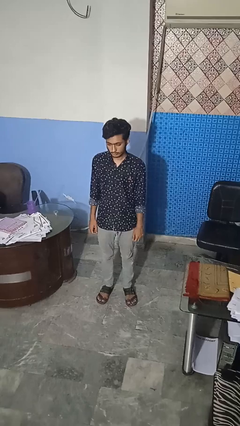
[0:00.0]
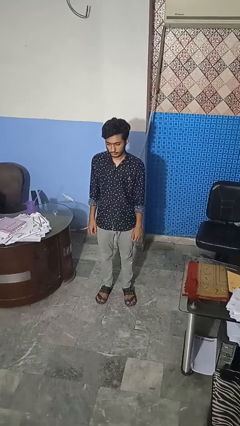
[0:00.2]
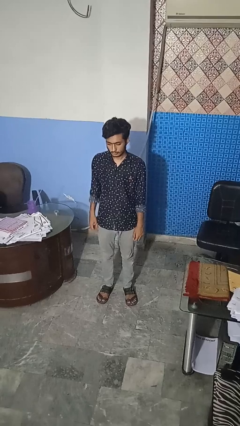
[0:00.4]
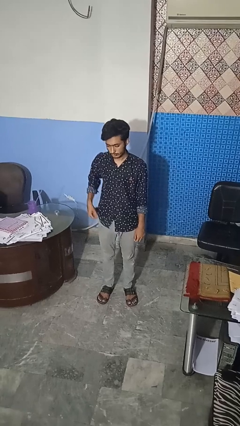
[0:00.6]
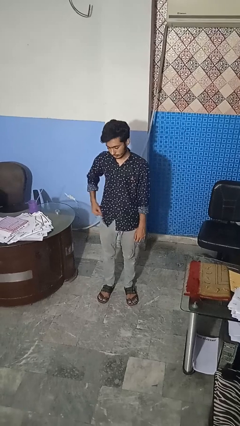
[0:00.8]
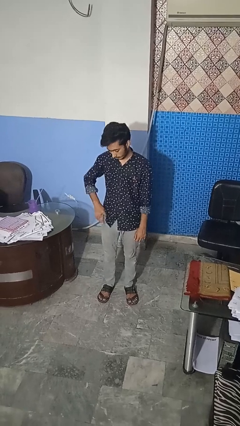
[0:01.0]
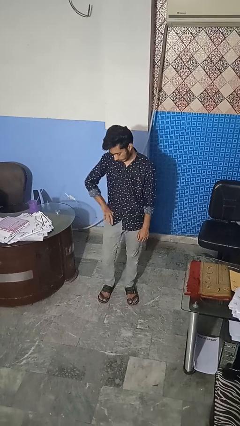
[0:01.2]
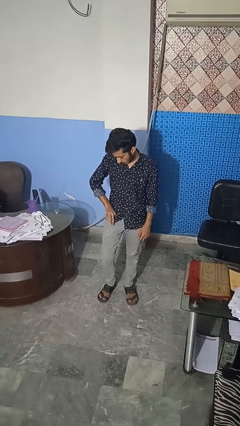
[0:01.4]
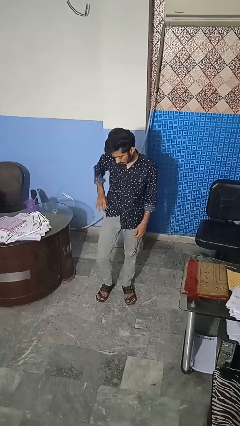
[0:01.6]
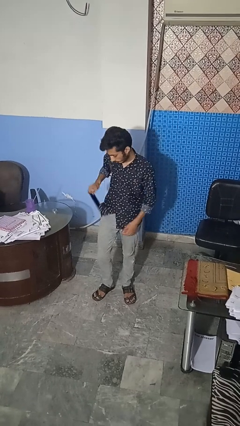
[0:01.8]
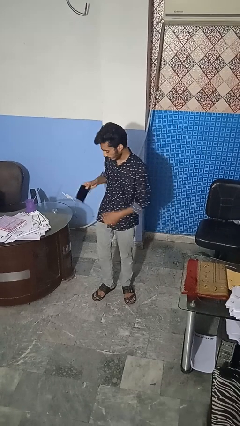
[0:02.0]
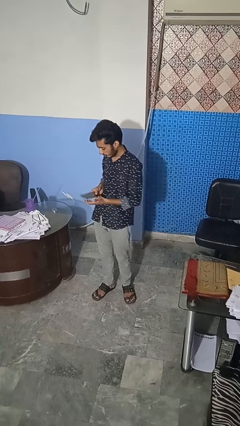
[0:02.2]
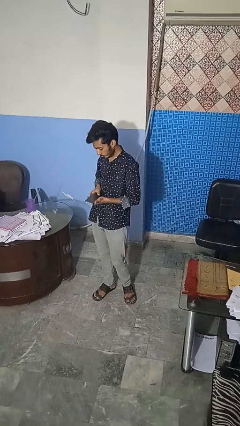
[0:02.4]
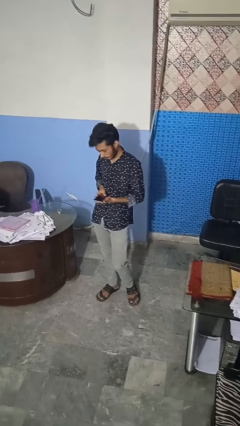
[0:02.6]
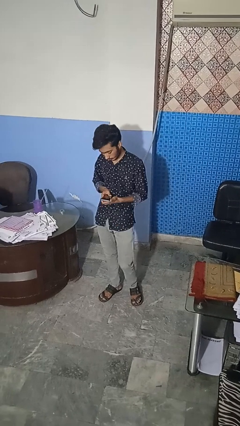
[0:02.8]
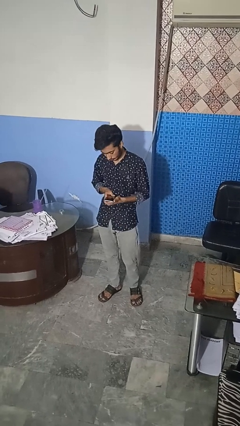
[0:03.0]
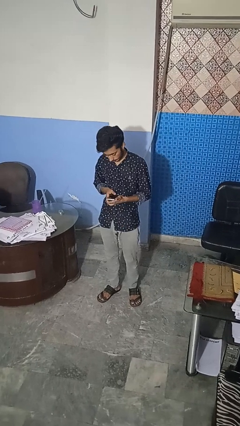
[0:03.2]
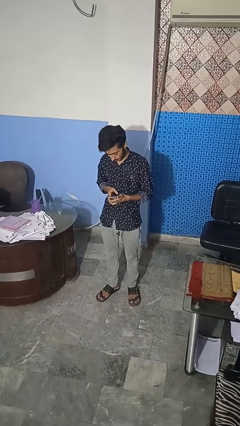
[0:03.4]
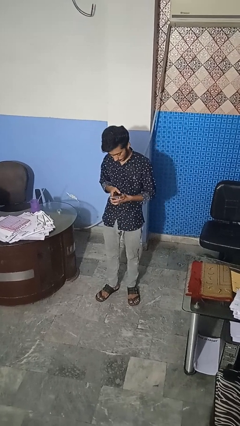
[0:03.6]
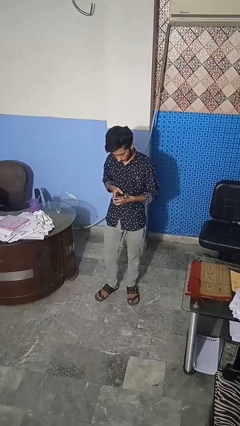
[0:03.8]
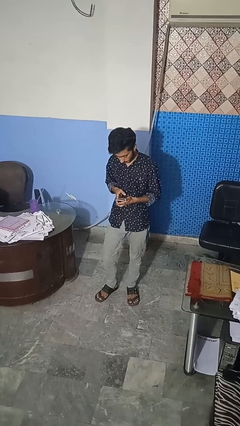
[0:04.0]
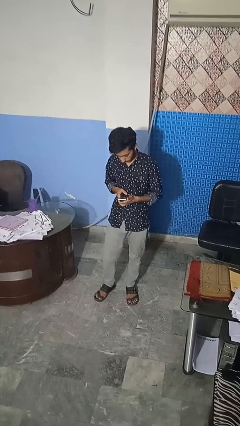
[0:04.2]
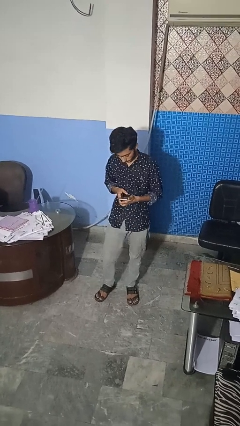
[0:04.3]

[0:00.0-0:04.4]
person takes phone from pocket

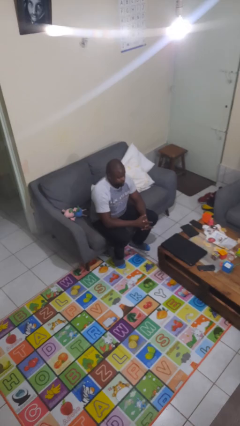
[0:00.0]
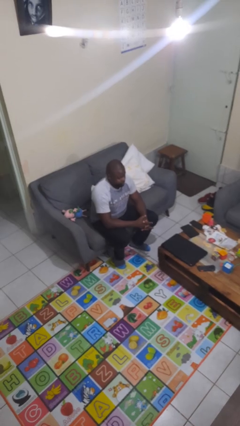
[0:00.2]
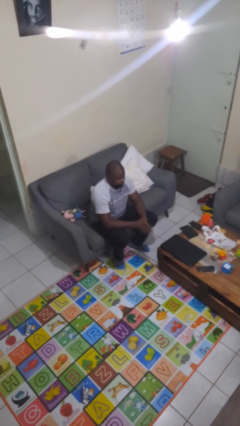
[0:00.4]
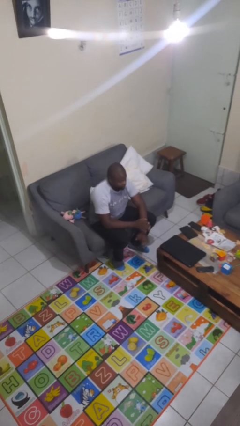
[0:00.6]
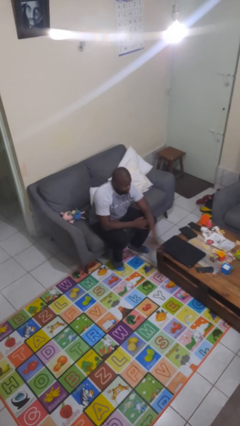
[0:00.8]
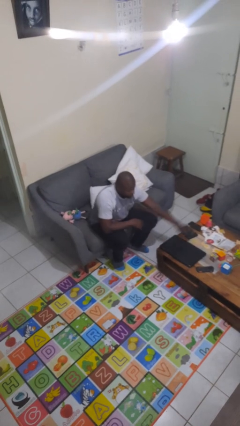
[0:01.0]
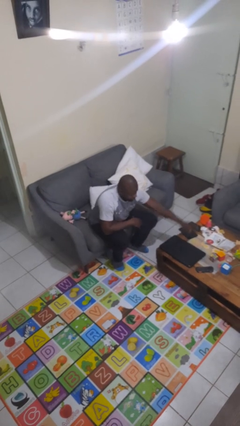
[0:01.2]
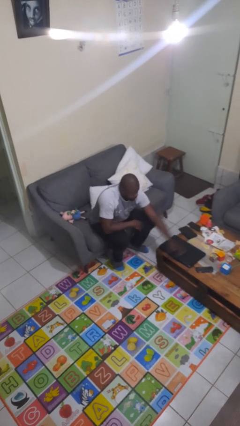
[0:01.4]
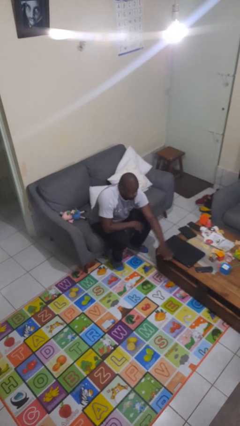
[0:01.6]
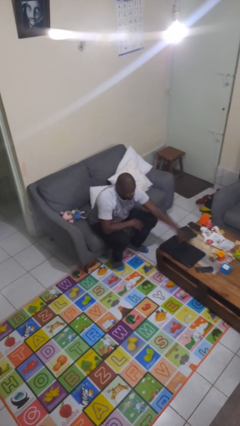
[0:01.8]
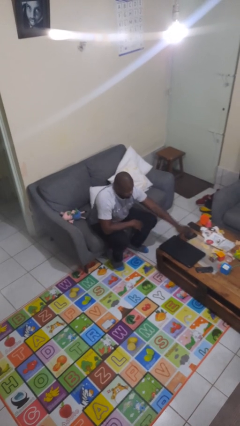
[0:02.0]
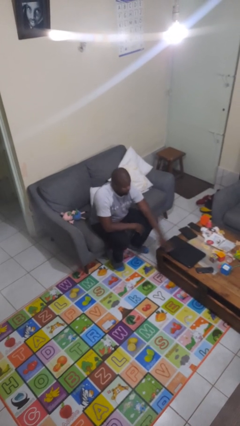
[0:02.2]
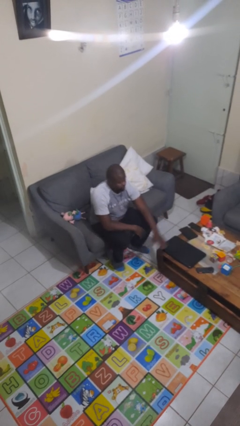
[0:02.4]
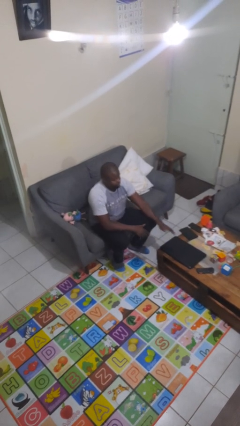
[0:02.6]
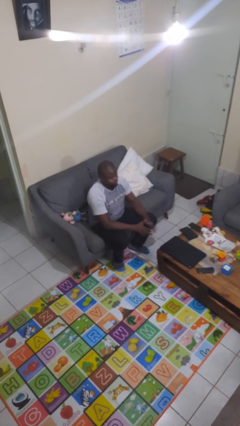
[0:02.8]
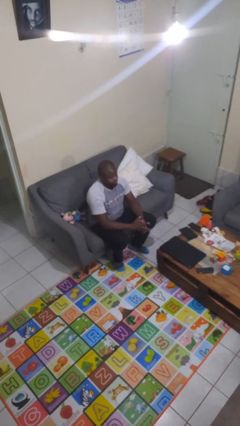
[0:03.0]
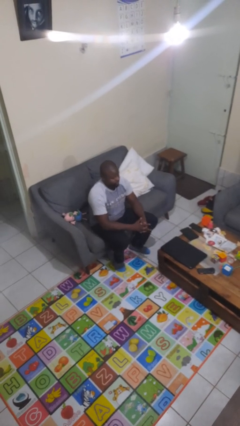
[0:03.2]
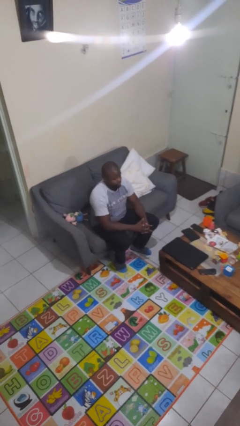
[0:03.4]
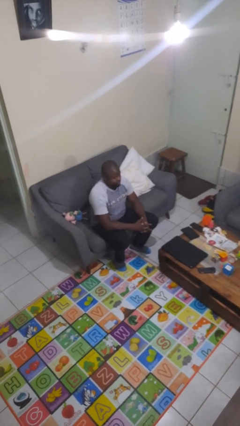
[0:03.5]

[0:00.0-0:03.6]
person waves hand over object

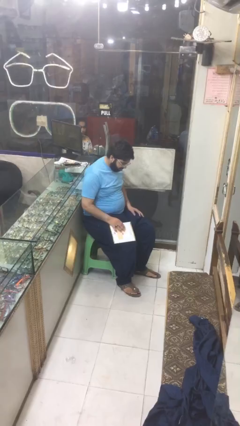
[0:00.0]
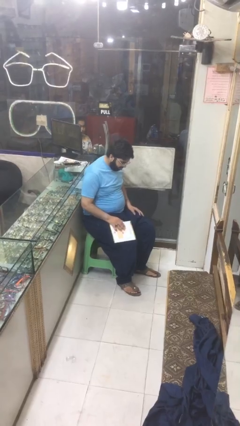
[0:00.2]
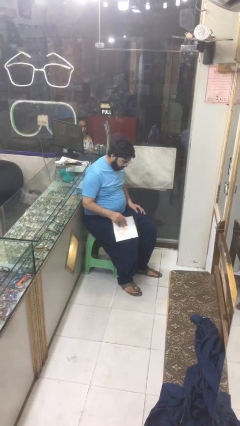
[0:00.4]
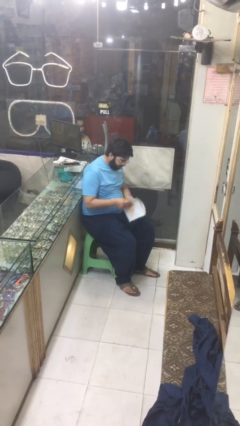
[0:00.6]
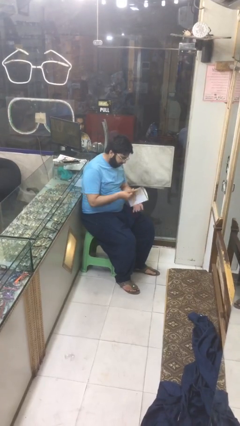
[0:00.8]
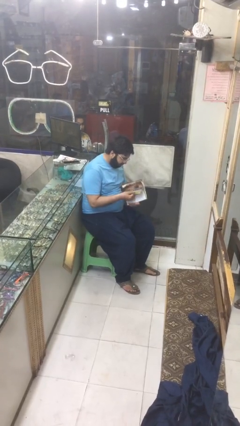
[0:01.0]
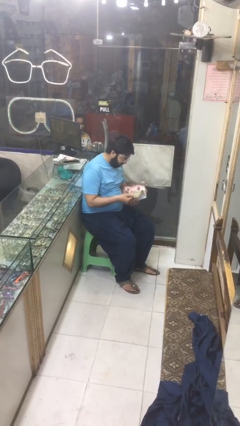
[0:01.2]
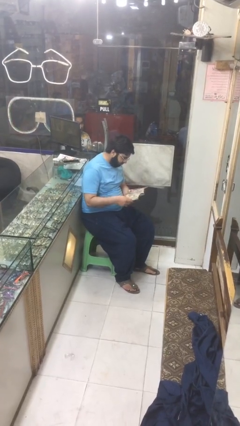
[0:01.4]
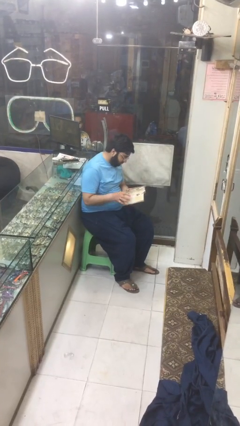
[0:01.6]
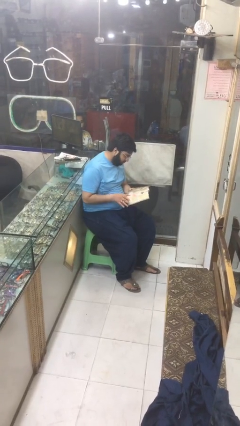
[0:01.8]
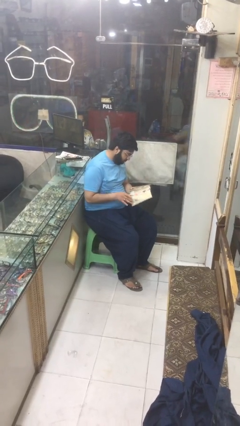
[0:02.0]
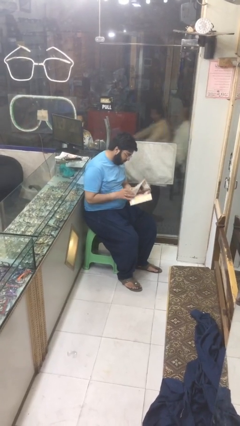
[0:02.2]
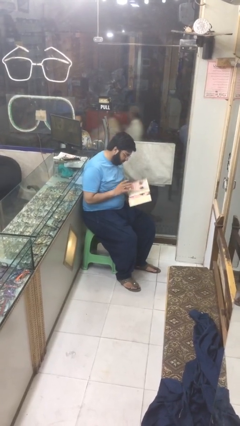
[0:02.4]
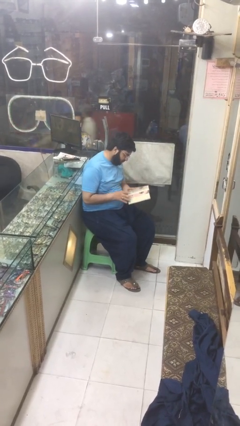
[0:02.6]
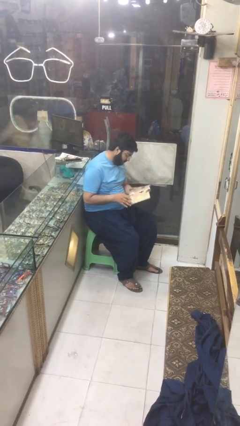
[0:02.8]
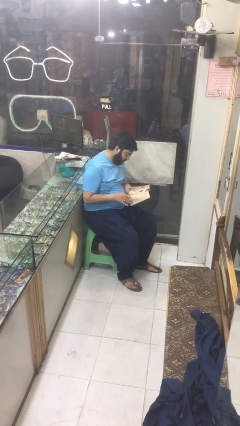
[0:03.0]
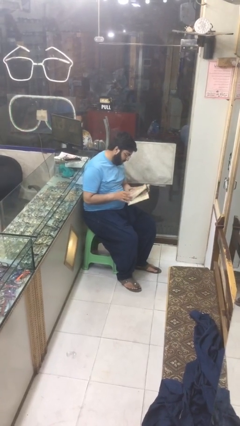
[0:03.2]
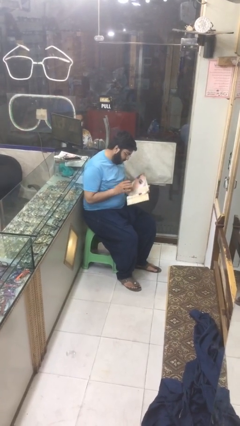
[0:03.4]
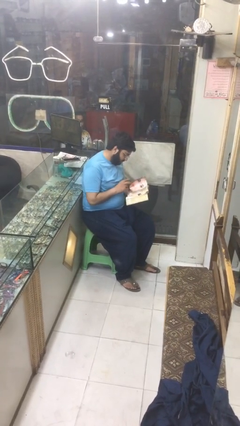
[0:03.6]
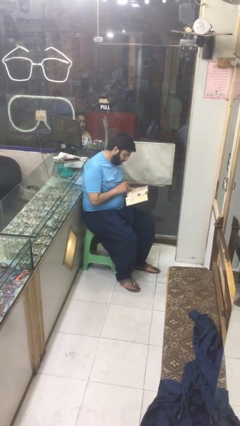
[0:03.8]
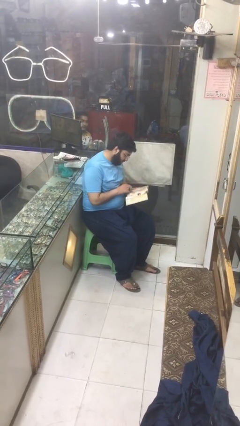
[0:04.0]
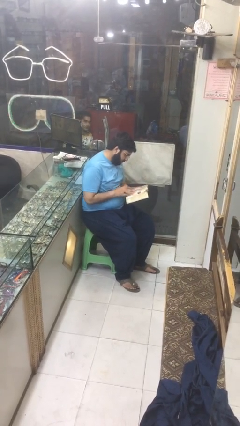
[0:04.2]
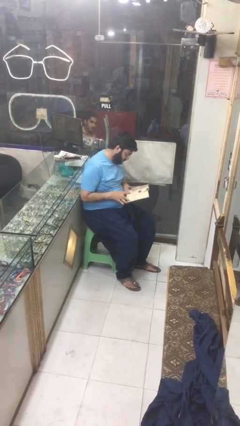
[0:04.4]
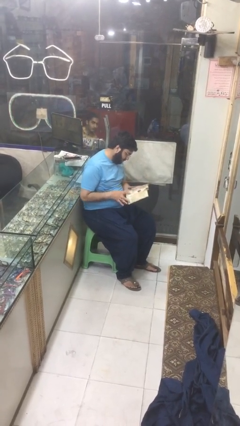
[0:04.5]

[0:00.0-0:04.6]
person reads document

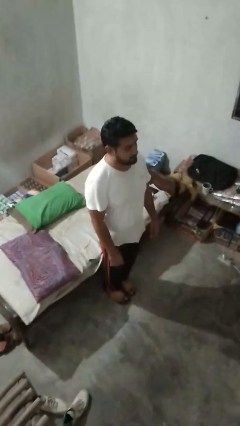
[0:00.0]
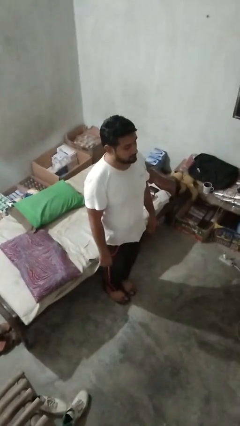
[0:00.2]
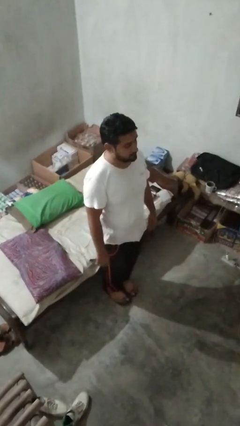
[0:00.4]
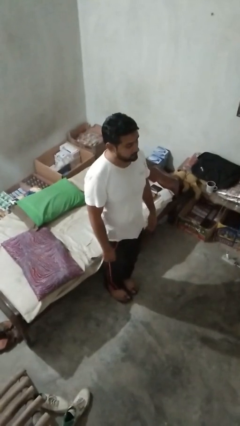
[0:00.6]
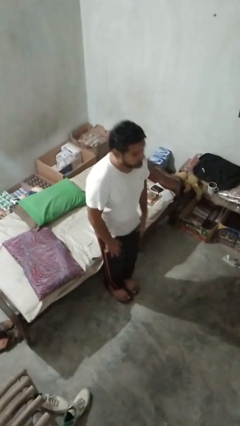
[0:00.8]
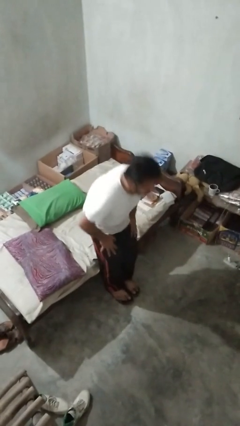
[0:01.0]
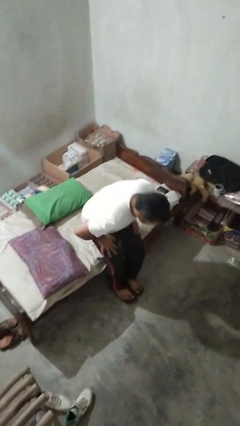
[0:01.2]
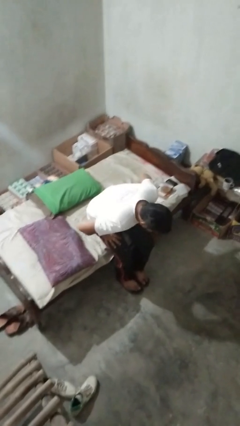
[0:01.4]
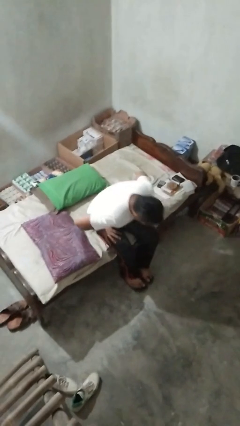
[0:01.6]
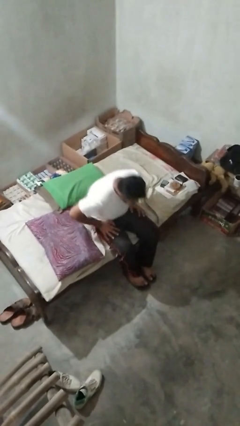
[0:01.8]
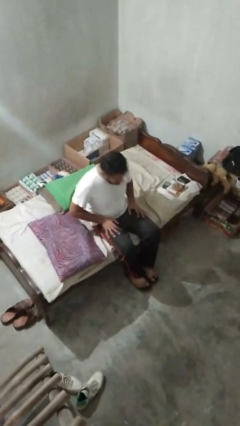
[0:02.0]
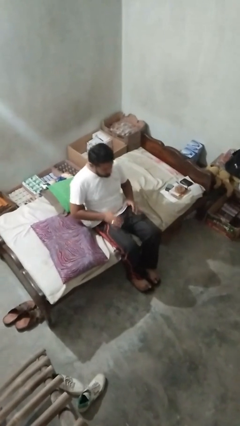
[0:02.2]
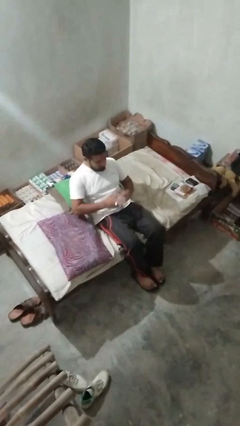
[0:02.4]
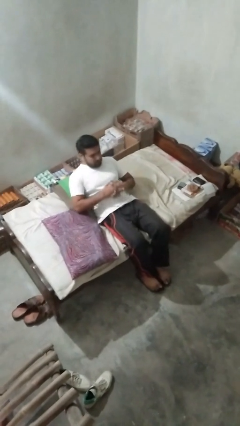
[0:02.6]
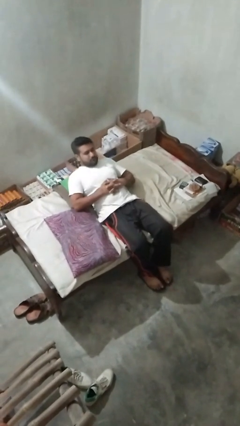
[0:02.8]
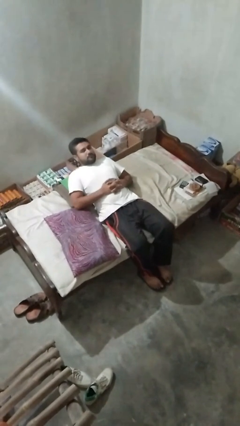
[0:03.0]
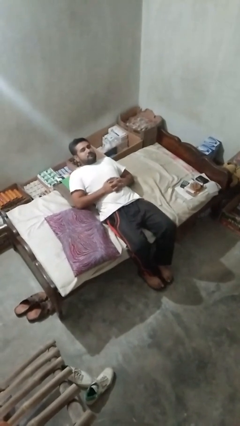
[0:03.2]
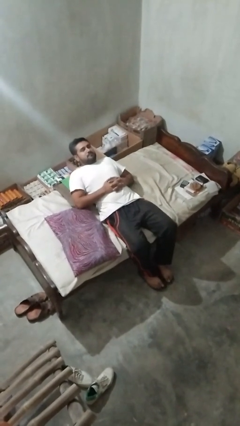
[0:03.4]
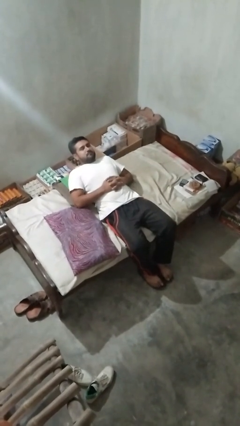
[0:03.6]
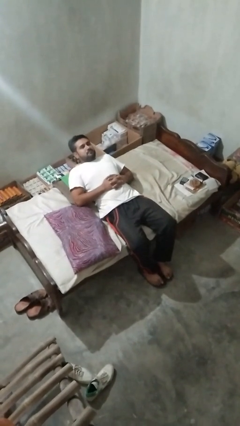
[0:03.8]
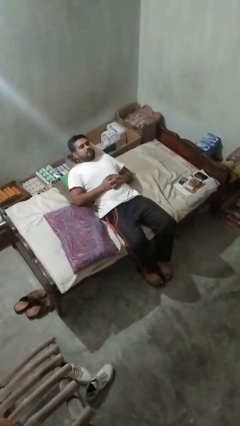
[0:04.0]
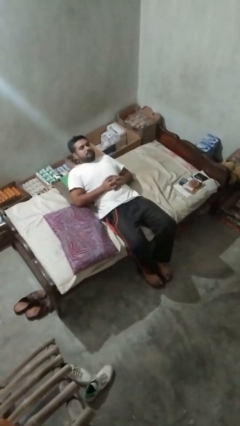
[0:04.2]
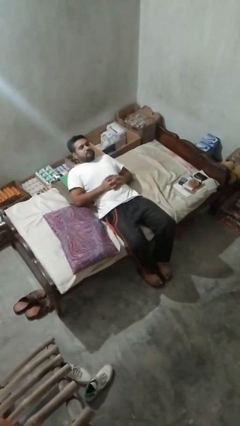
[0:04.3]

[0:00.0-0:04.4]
person lies down on couch

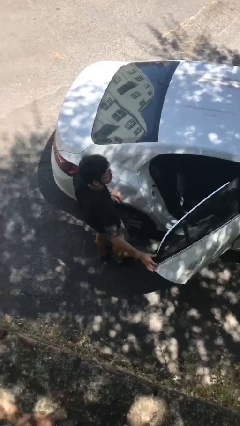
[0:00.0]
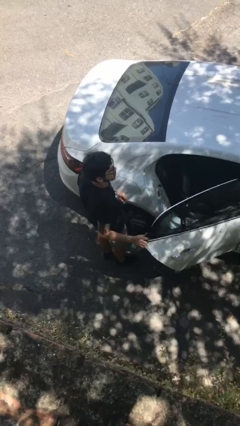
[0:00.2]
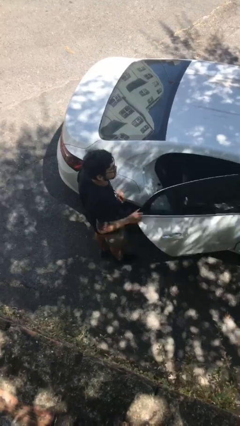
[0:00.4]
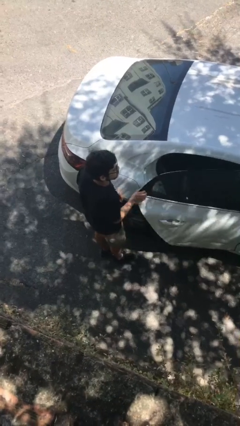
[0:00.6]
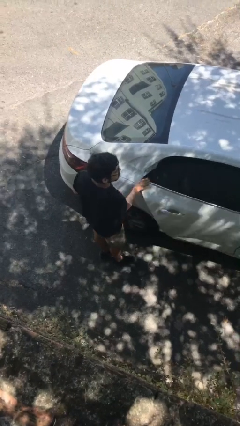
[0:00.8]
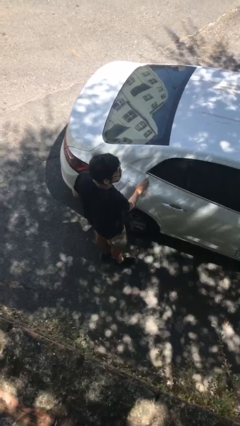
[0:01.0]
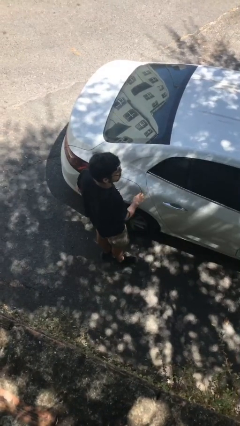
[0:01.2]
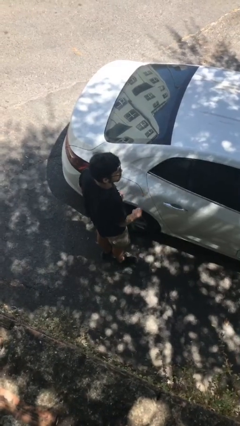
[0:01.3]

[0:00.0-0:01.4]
person closes car door
